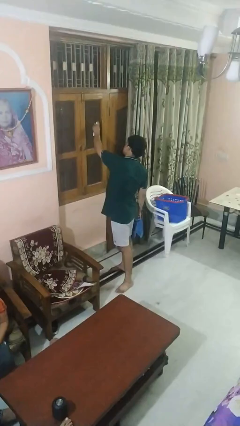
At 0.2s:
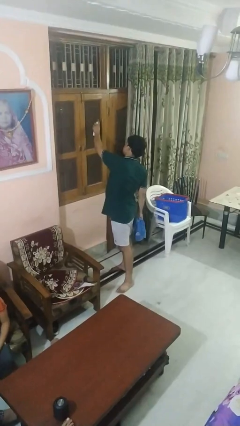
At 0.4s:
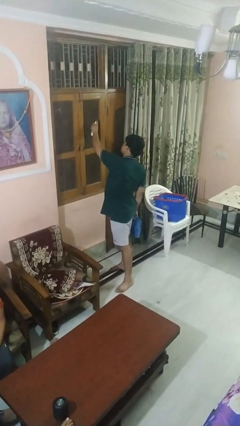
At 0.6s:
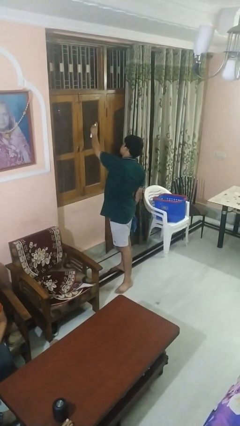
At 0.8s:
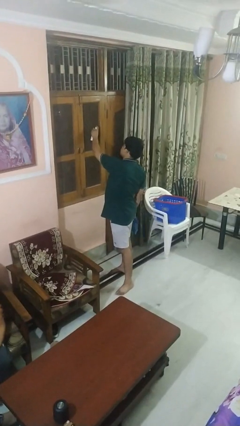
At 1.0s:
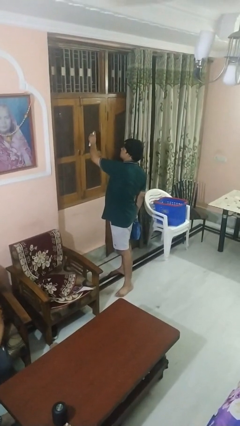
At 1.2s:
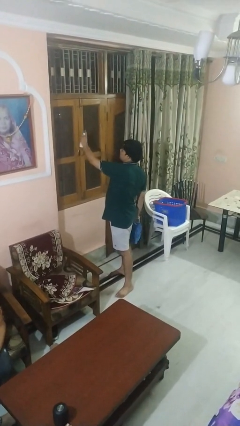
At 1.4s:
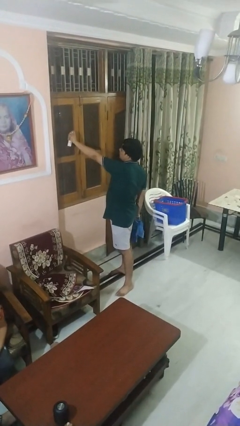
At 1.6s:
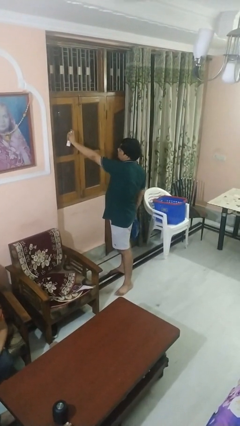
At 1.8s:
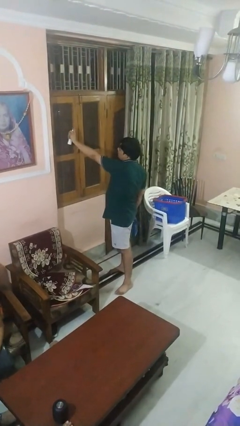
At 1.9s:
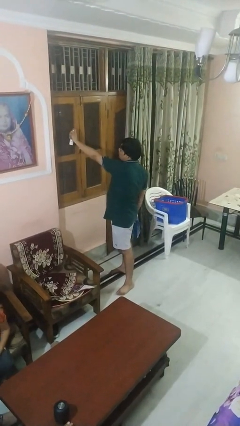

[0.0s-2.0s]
person sprays from bottle

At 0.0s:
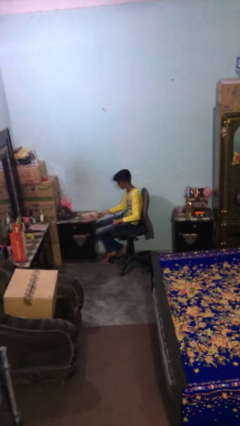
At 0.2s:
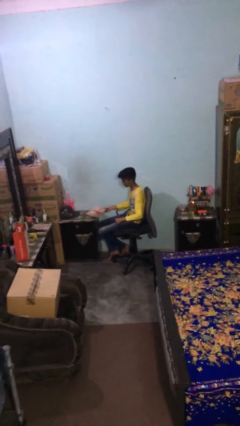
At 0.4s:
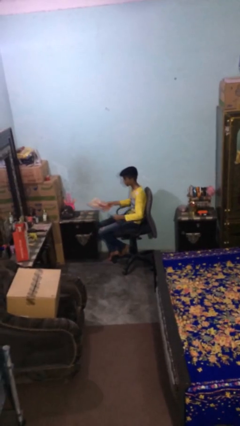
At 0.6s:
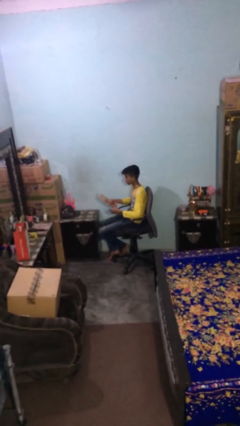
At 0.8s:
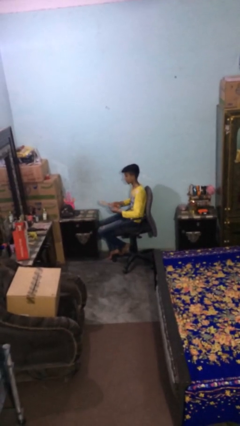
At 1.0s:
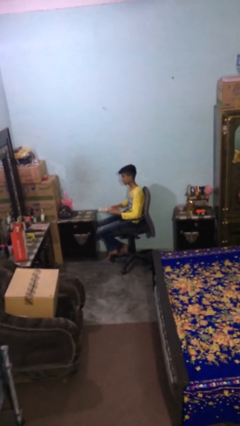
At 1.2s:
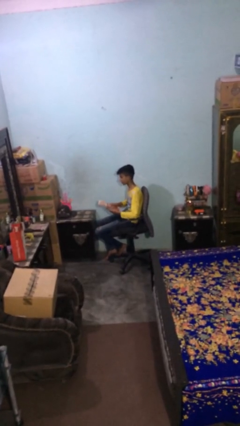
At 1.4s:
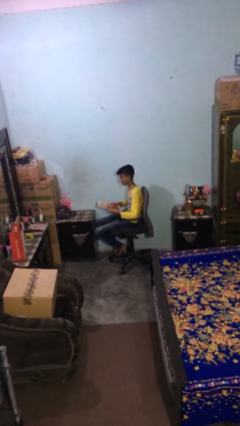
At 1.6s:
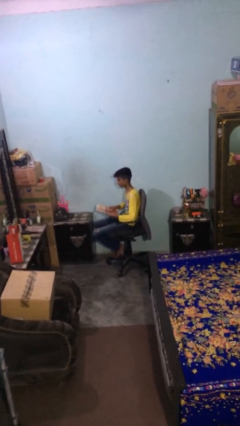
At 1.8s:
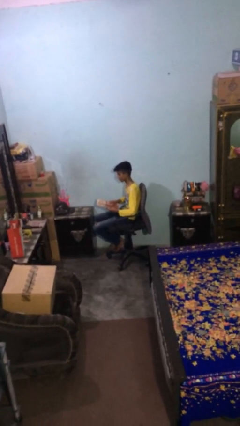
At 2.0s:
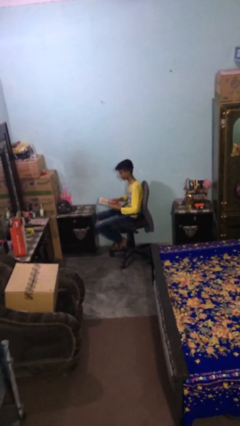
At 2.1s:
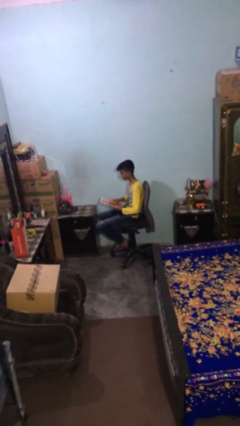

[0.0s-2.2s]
person picks up object from table

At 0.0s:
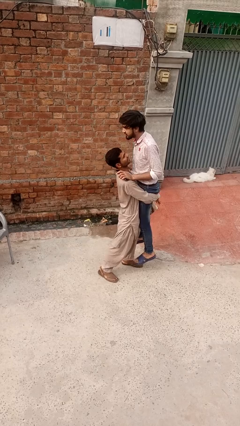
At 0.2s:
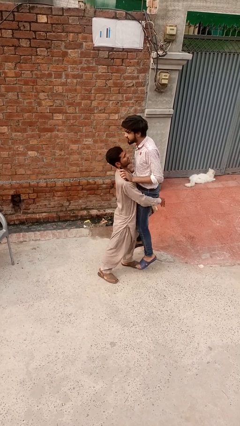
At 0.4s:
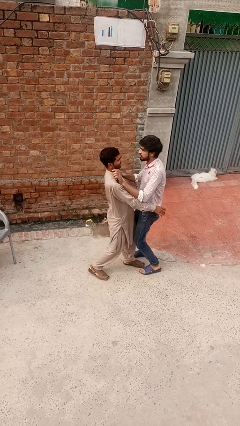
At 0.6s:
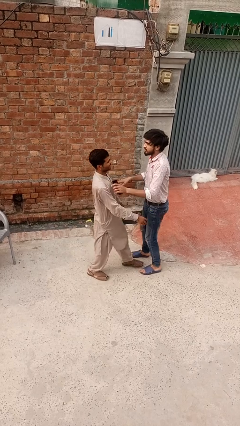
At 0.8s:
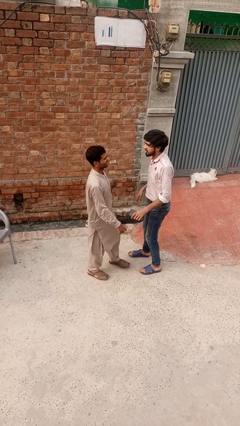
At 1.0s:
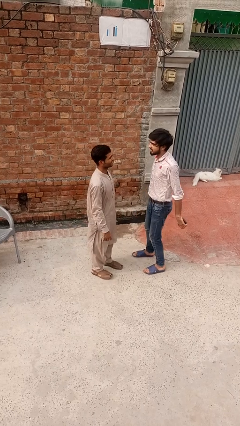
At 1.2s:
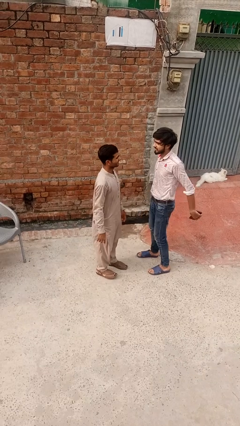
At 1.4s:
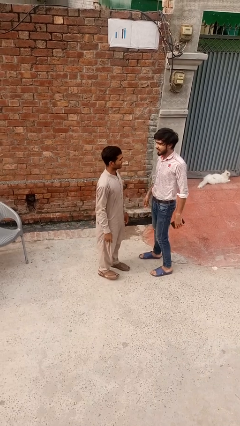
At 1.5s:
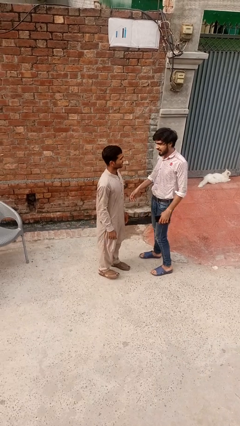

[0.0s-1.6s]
person puts down person

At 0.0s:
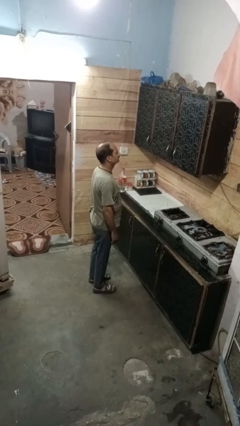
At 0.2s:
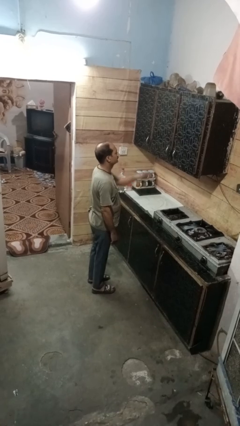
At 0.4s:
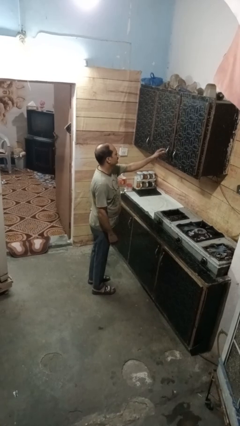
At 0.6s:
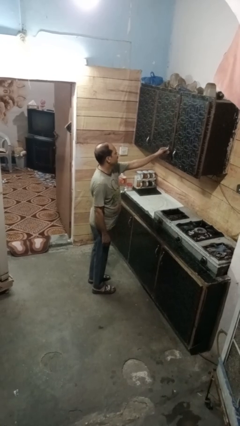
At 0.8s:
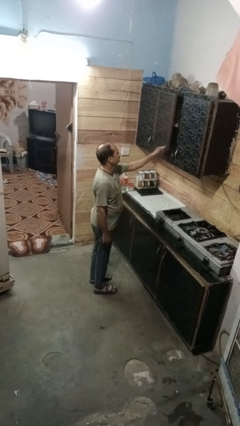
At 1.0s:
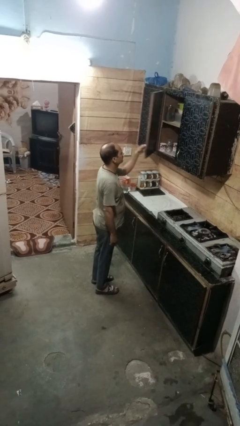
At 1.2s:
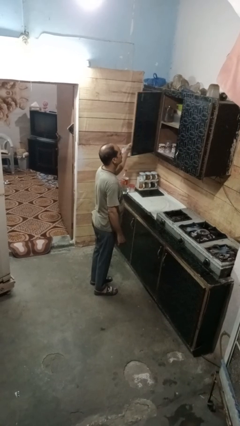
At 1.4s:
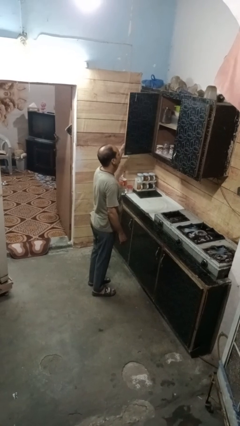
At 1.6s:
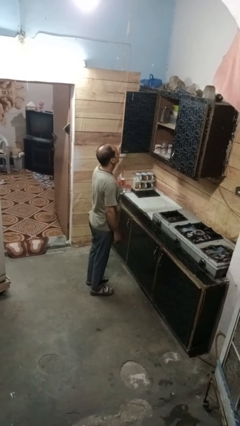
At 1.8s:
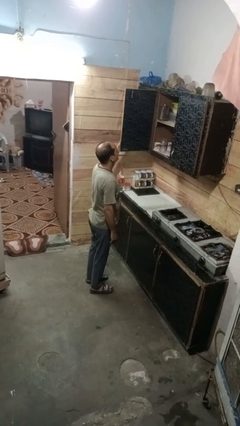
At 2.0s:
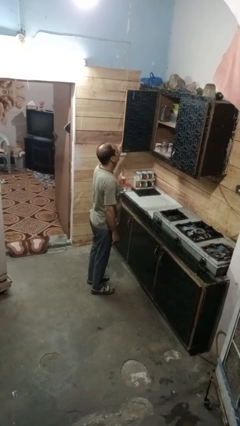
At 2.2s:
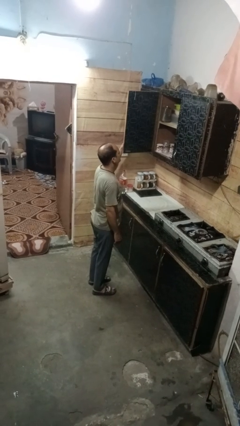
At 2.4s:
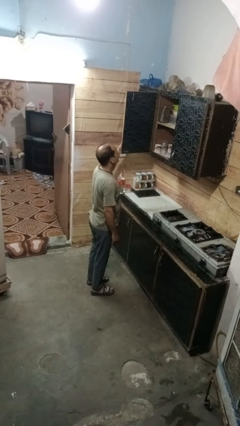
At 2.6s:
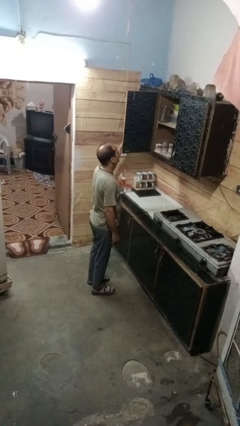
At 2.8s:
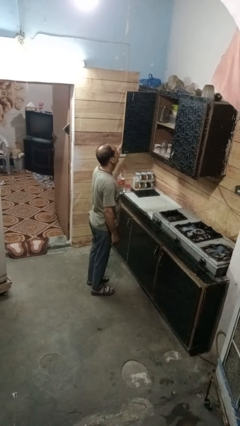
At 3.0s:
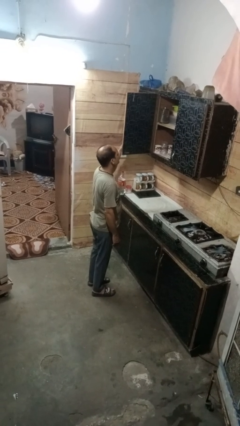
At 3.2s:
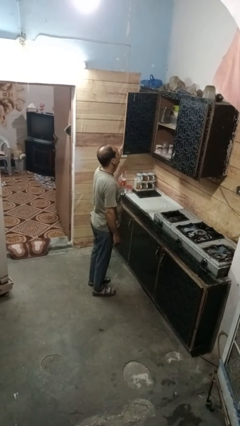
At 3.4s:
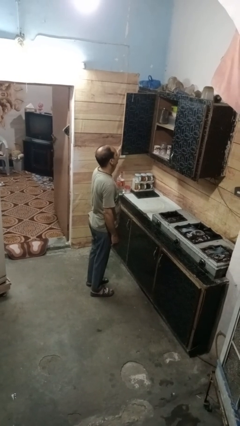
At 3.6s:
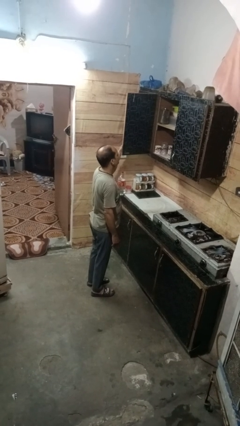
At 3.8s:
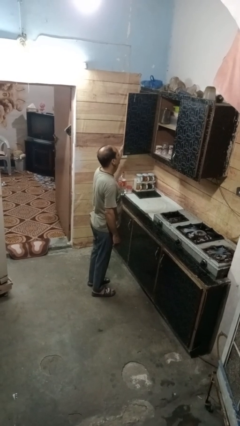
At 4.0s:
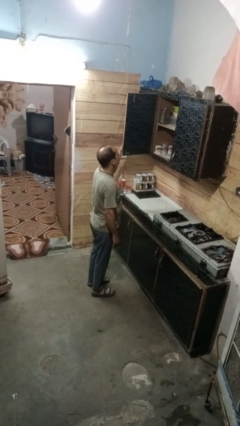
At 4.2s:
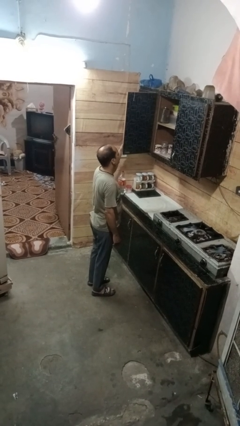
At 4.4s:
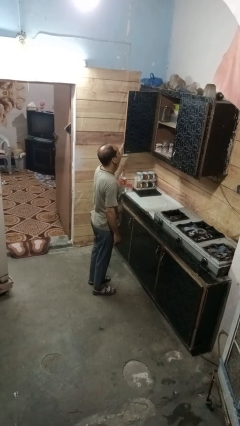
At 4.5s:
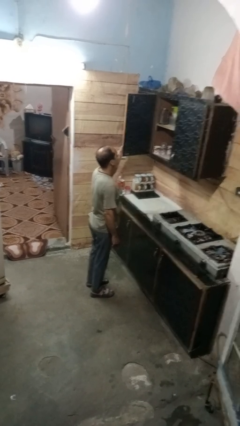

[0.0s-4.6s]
person opens cabinet

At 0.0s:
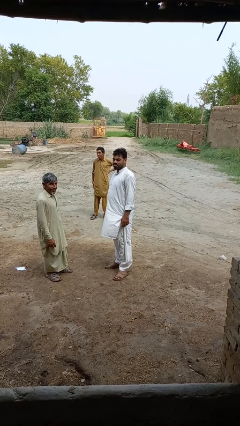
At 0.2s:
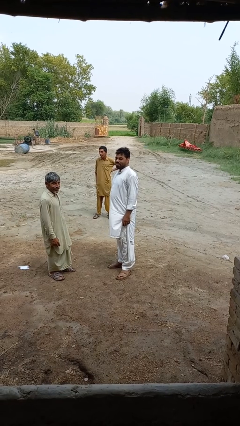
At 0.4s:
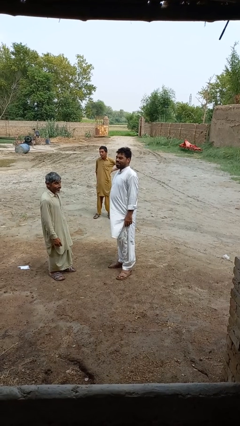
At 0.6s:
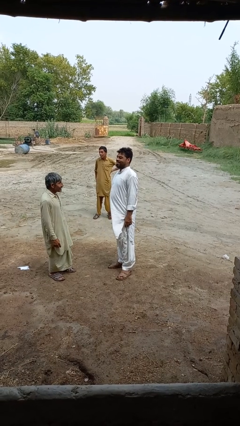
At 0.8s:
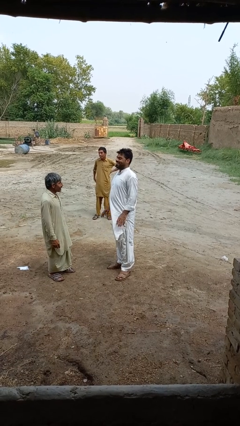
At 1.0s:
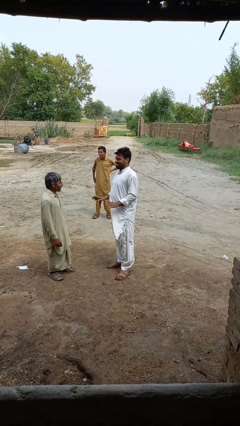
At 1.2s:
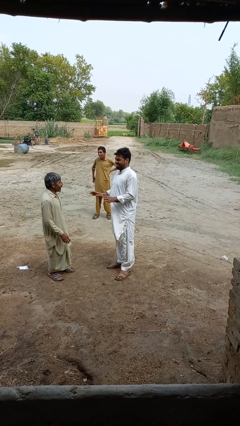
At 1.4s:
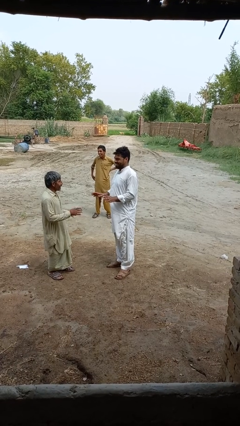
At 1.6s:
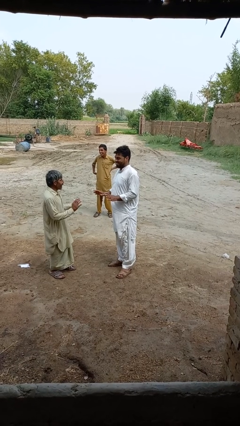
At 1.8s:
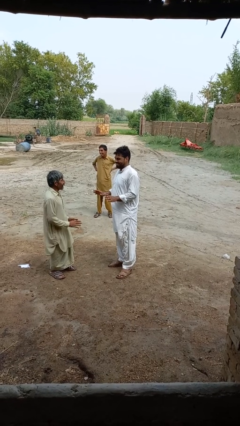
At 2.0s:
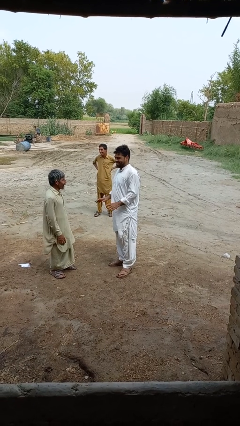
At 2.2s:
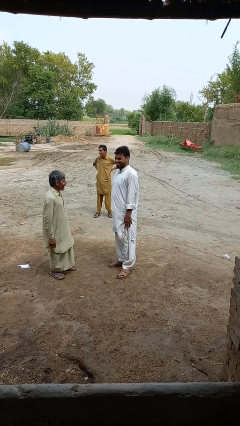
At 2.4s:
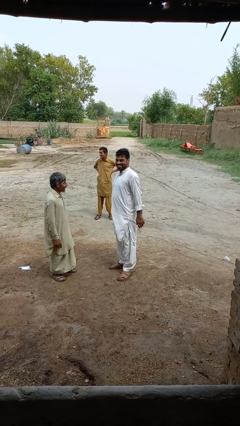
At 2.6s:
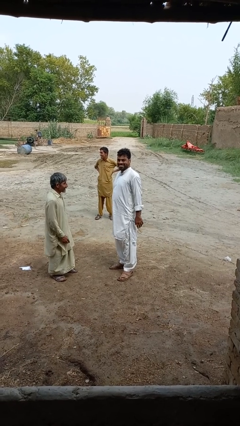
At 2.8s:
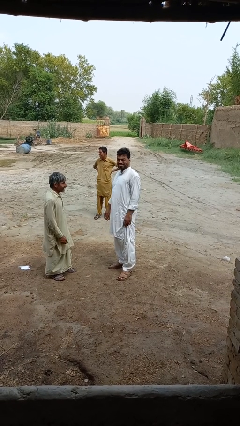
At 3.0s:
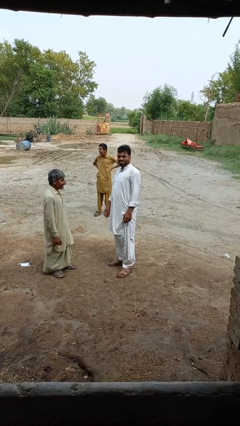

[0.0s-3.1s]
person laughs with person

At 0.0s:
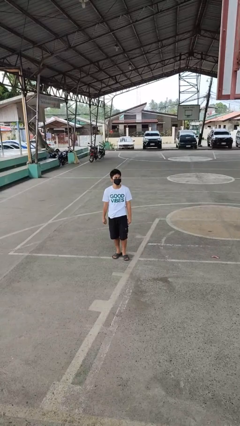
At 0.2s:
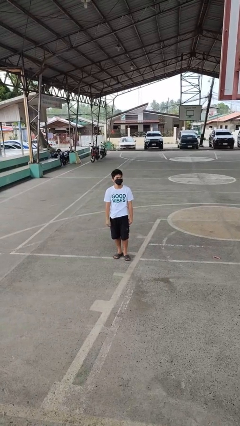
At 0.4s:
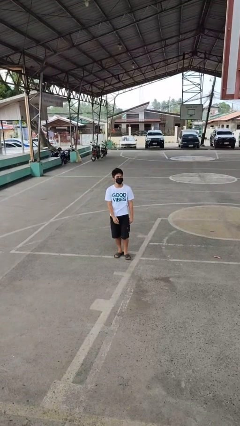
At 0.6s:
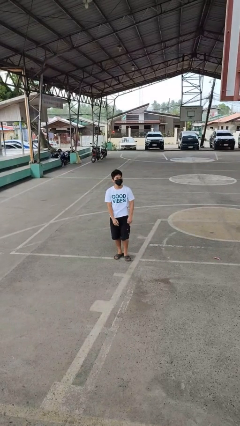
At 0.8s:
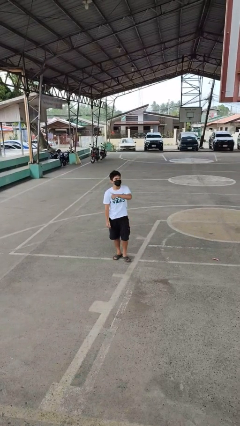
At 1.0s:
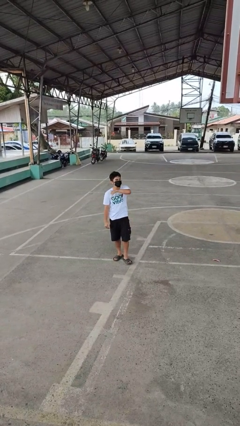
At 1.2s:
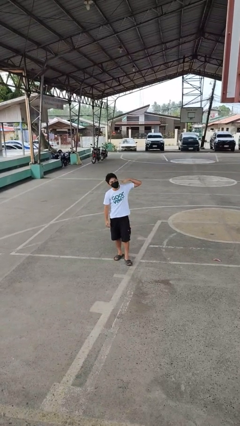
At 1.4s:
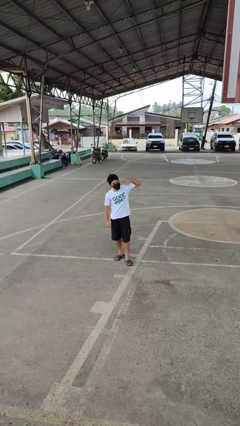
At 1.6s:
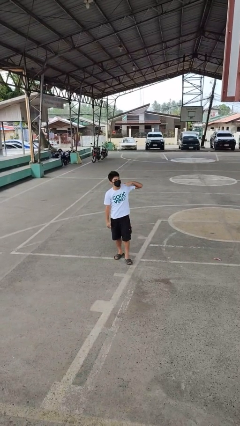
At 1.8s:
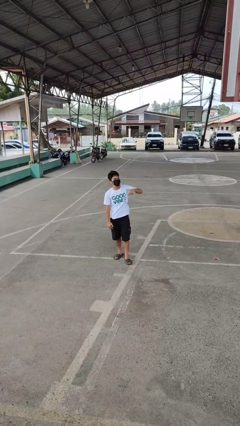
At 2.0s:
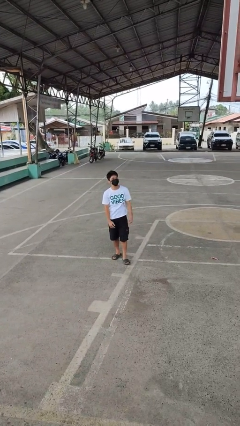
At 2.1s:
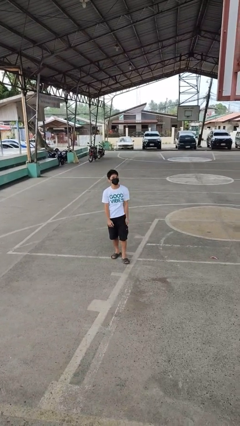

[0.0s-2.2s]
person gestures cut

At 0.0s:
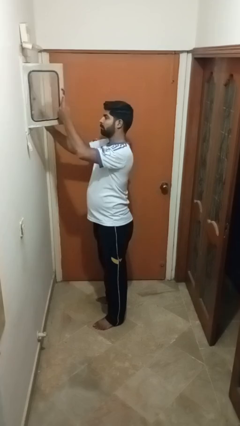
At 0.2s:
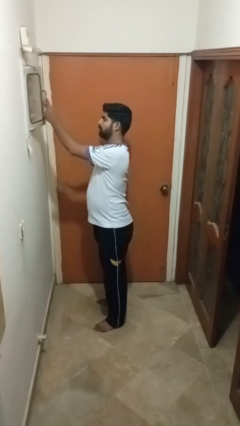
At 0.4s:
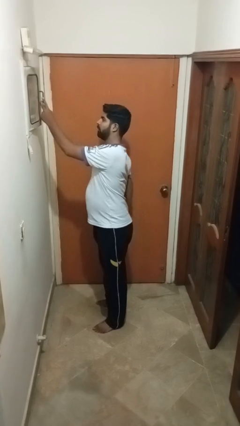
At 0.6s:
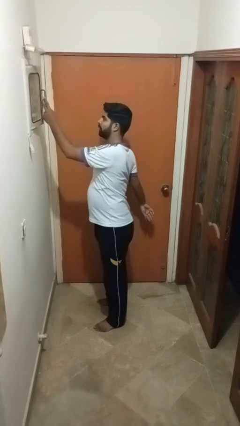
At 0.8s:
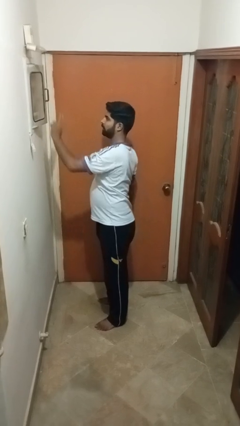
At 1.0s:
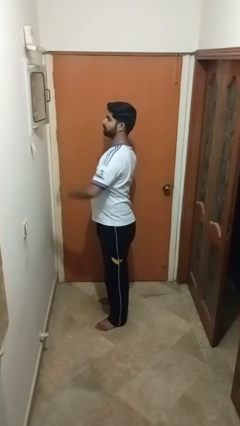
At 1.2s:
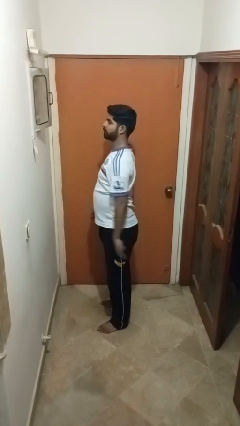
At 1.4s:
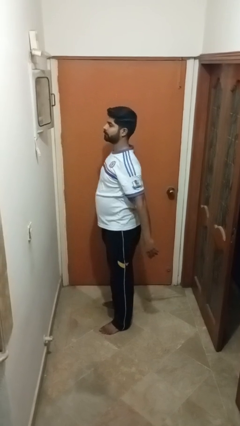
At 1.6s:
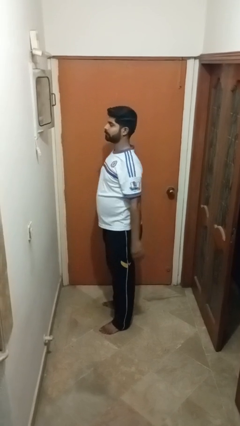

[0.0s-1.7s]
person puts letters in mailbox
